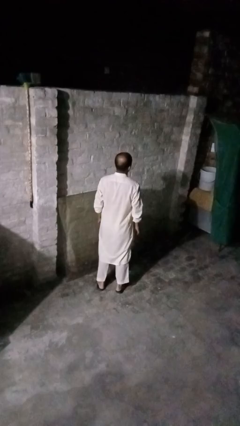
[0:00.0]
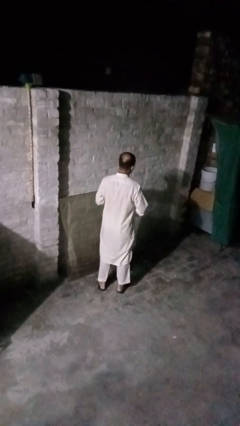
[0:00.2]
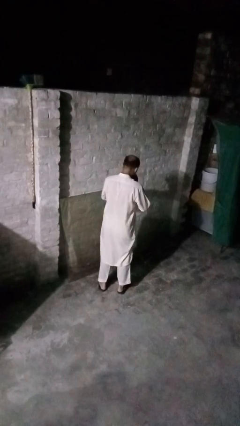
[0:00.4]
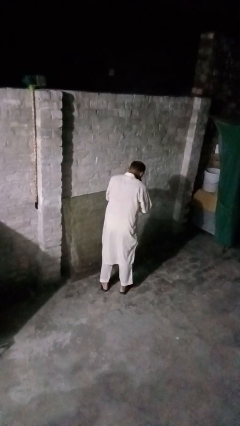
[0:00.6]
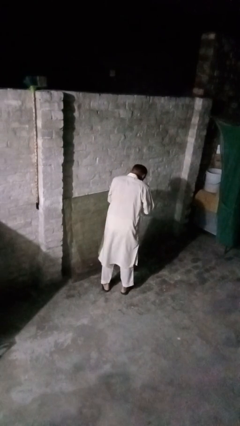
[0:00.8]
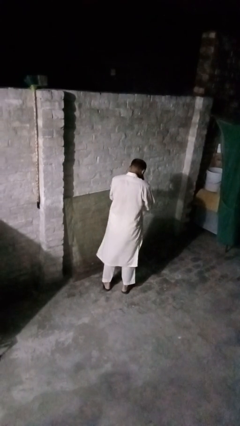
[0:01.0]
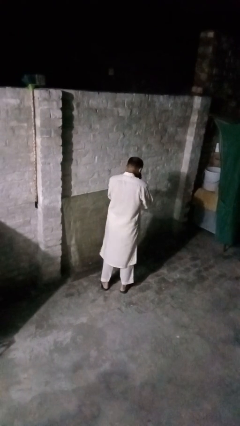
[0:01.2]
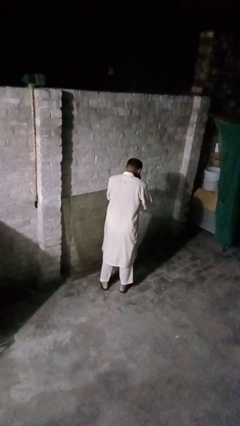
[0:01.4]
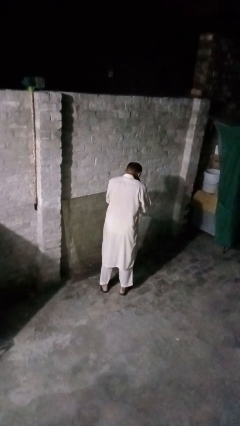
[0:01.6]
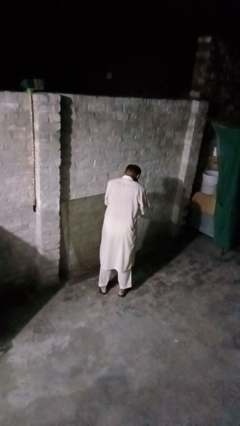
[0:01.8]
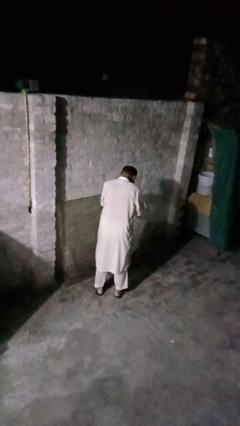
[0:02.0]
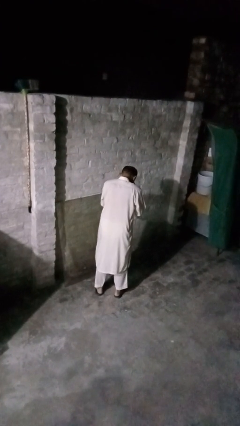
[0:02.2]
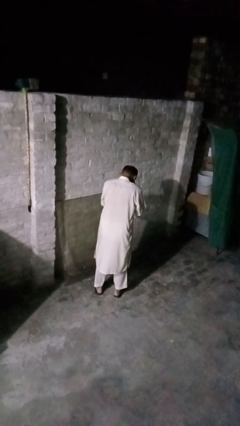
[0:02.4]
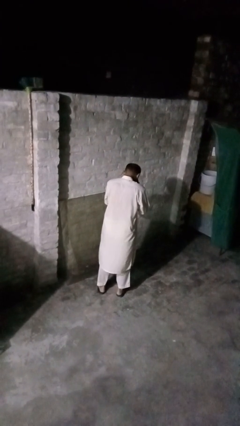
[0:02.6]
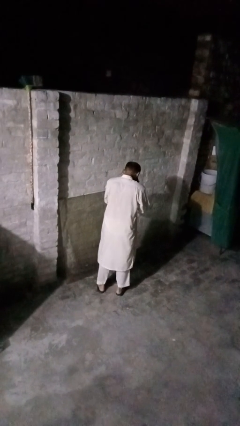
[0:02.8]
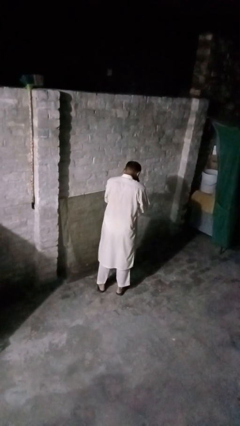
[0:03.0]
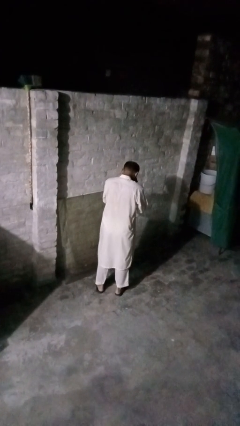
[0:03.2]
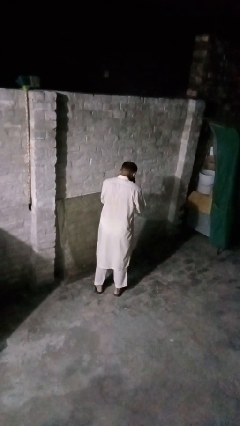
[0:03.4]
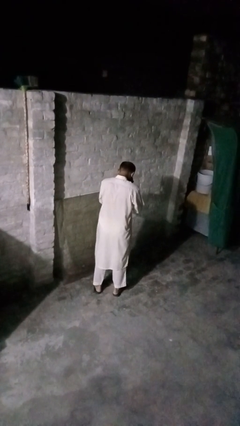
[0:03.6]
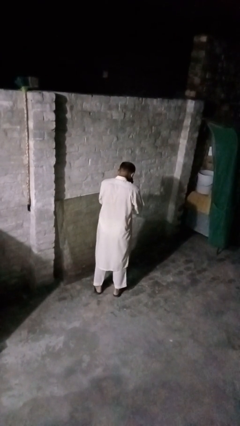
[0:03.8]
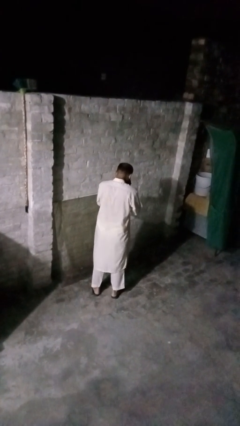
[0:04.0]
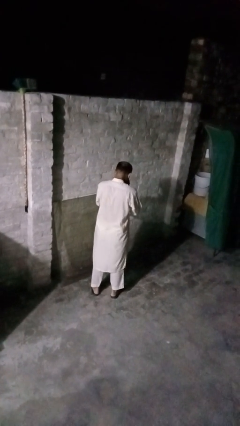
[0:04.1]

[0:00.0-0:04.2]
person sneezes into hand

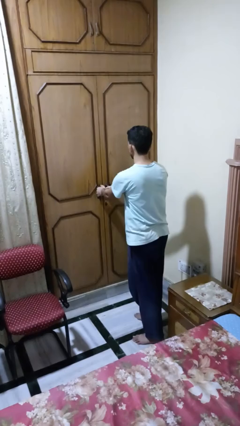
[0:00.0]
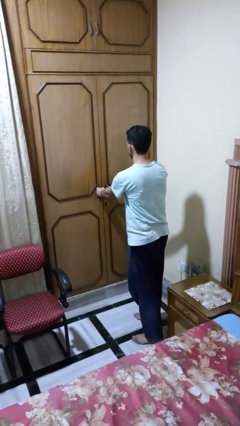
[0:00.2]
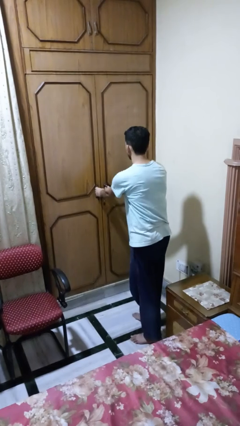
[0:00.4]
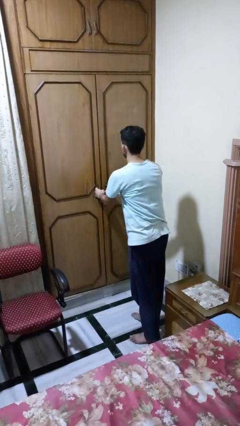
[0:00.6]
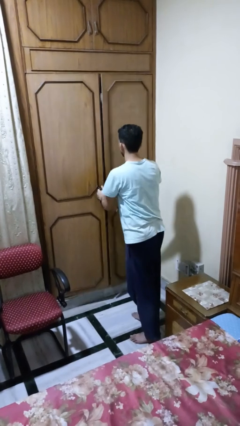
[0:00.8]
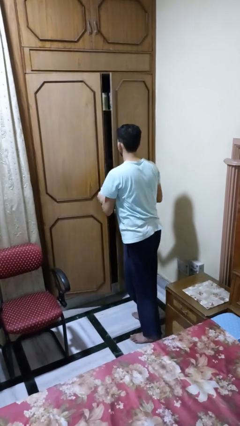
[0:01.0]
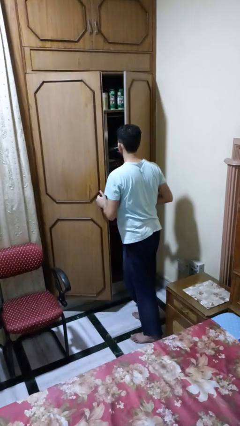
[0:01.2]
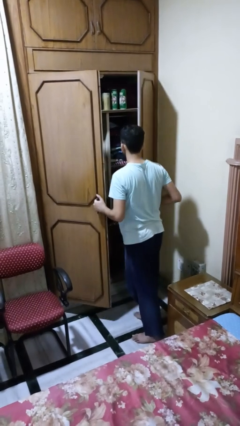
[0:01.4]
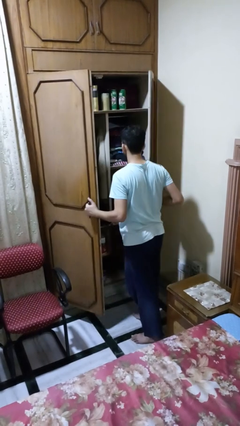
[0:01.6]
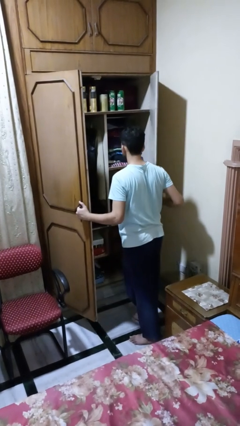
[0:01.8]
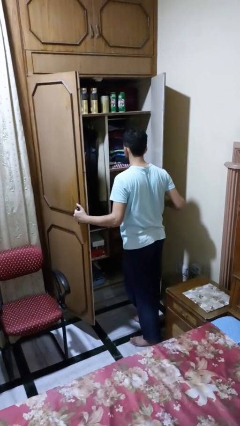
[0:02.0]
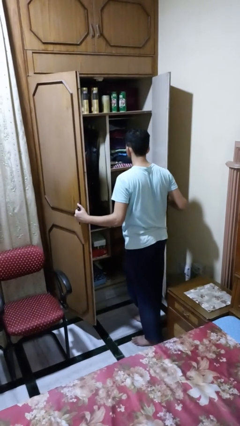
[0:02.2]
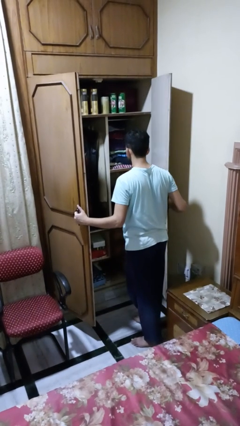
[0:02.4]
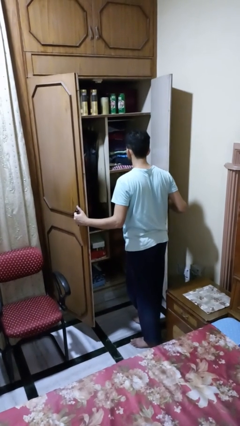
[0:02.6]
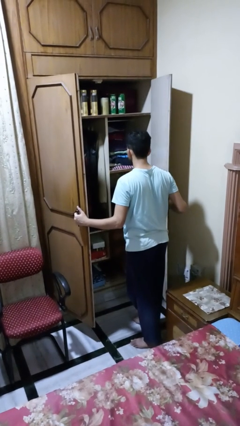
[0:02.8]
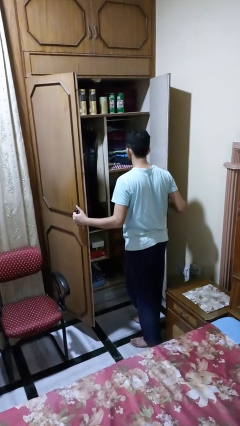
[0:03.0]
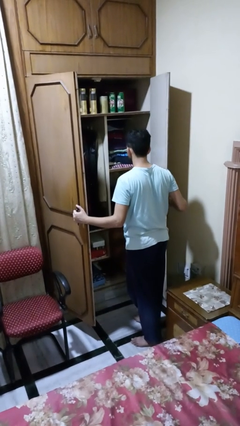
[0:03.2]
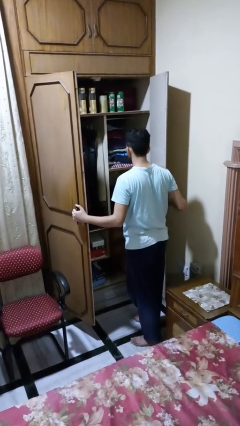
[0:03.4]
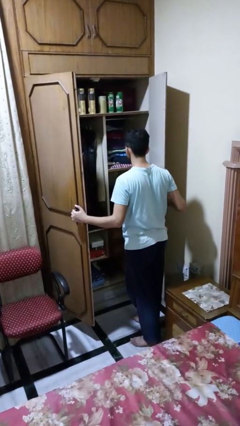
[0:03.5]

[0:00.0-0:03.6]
person opens closet door

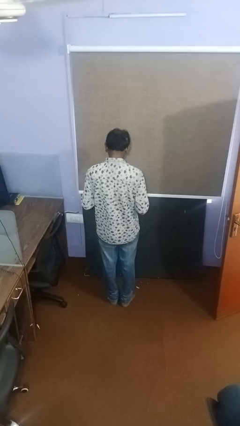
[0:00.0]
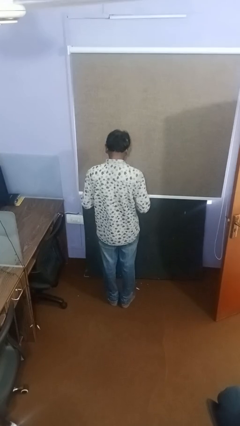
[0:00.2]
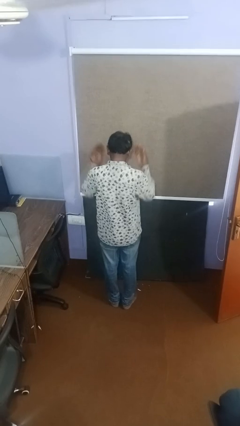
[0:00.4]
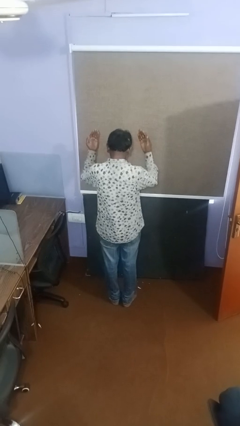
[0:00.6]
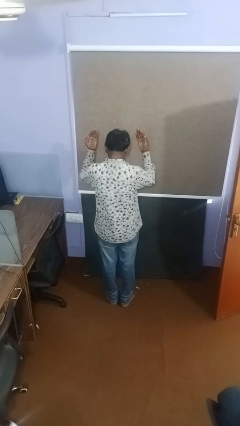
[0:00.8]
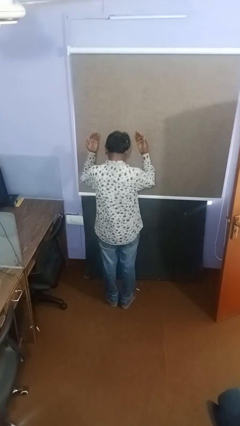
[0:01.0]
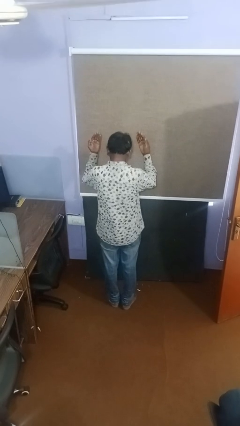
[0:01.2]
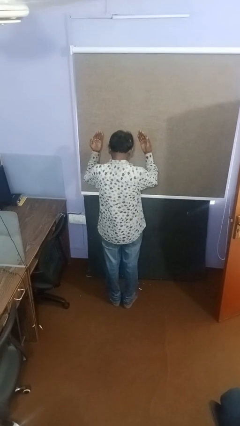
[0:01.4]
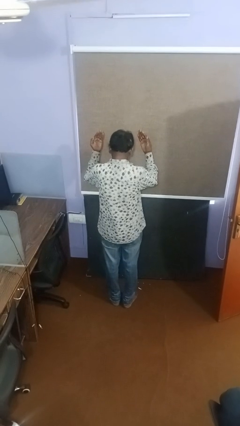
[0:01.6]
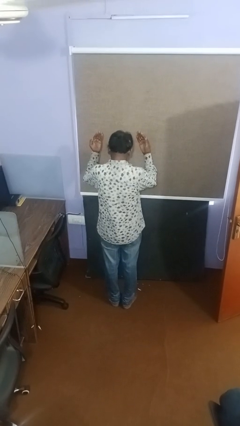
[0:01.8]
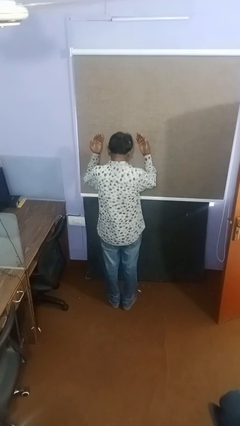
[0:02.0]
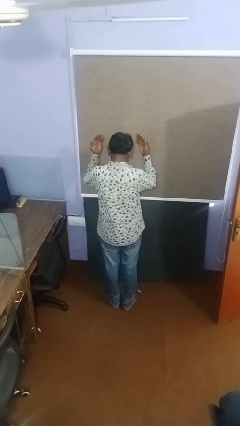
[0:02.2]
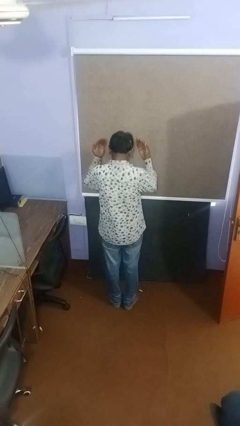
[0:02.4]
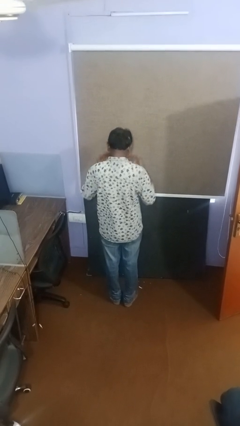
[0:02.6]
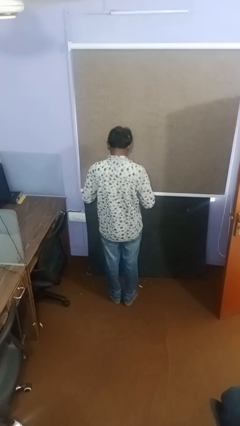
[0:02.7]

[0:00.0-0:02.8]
person gestures swipe up

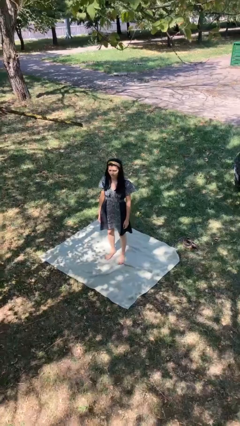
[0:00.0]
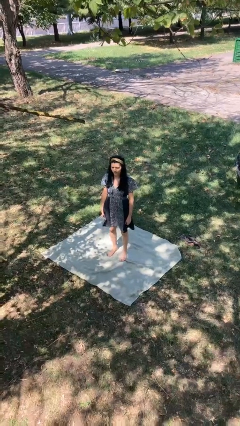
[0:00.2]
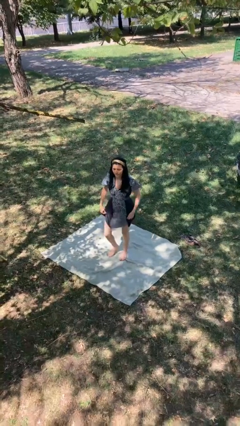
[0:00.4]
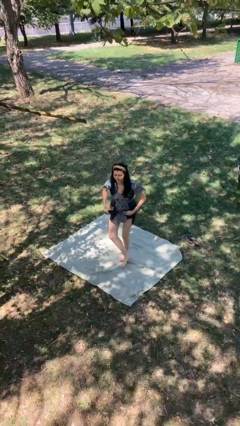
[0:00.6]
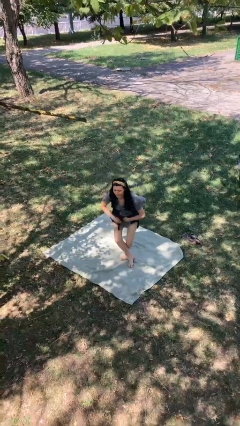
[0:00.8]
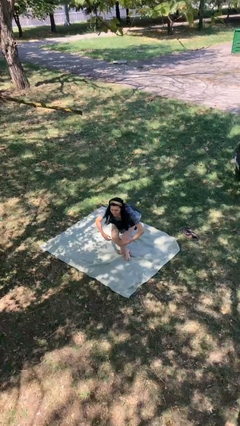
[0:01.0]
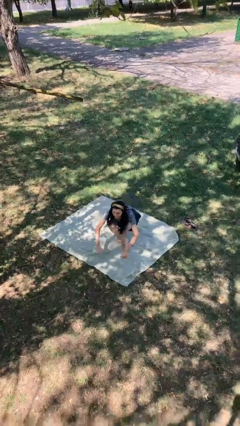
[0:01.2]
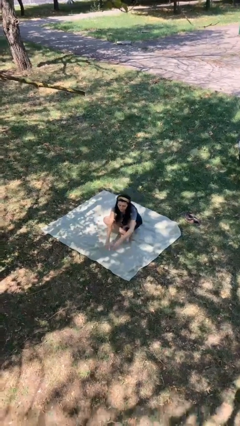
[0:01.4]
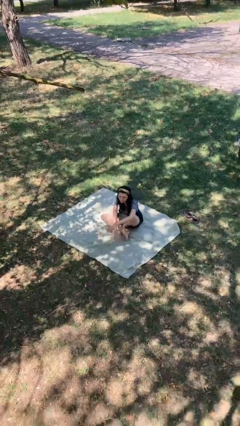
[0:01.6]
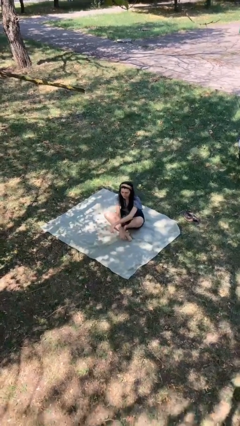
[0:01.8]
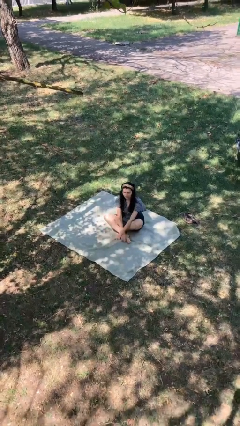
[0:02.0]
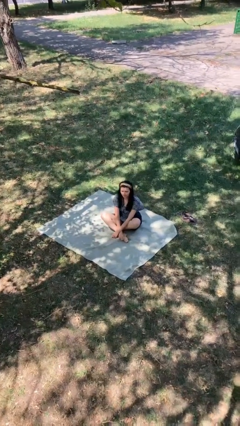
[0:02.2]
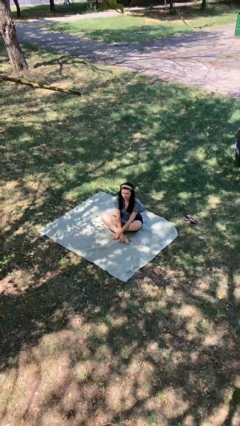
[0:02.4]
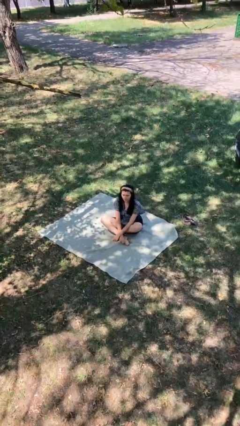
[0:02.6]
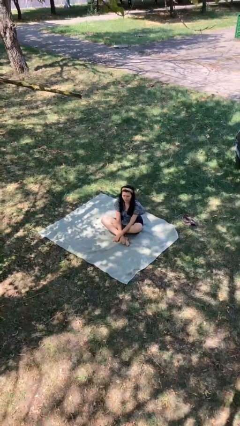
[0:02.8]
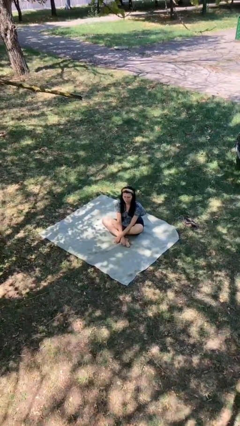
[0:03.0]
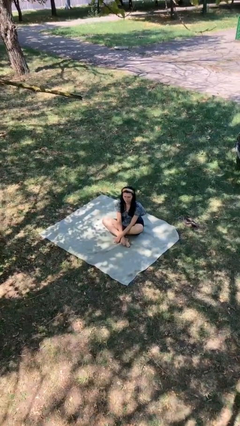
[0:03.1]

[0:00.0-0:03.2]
person sits crisscross

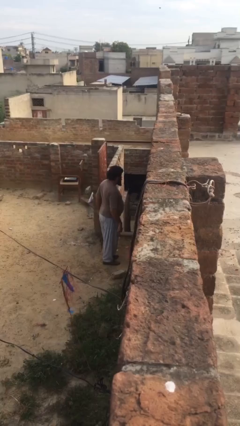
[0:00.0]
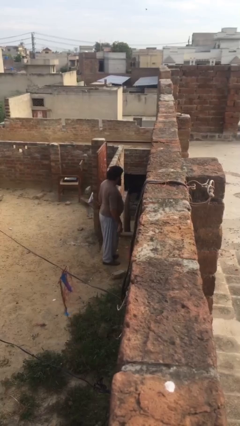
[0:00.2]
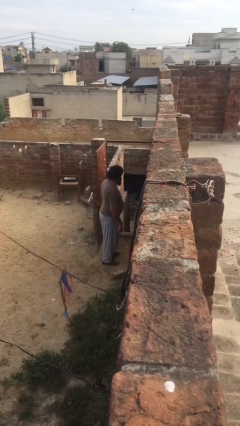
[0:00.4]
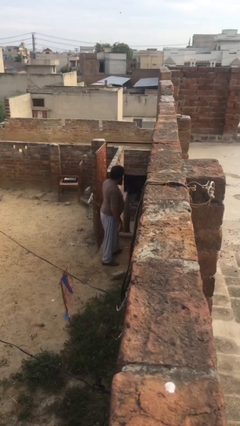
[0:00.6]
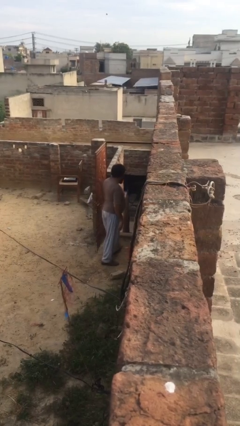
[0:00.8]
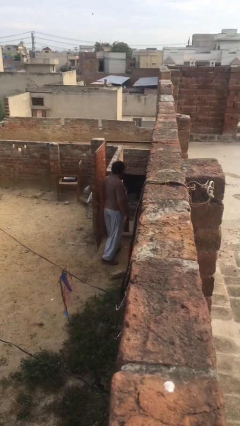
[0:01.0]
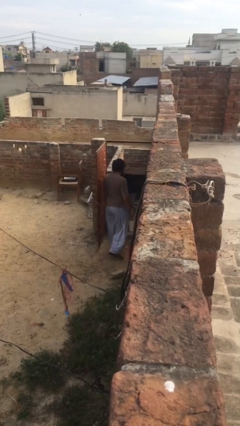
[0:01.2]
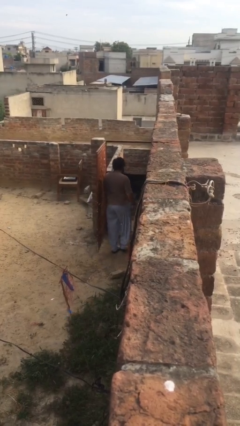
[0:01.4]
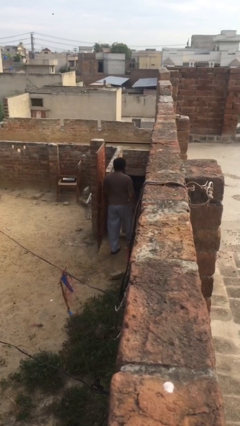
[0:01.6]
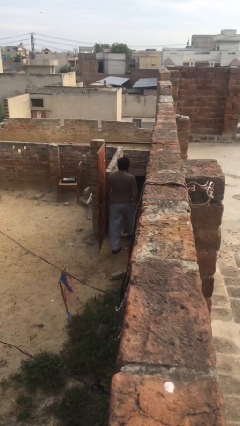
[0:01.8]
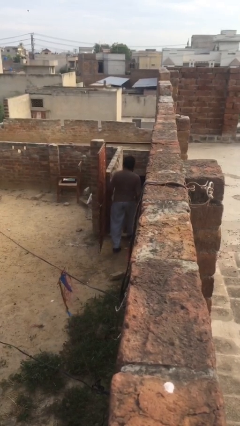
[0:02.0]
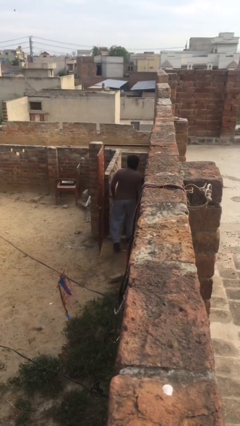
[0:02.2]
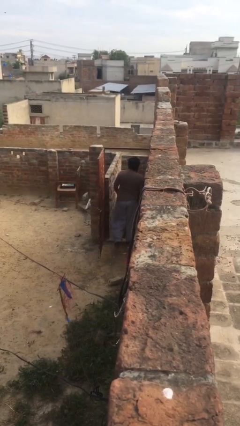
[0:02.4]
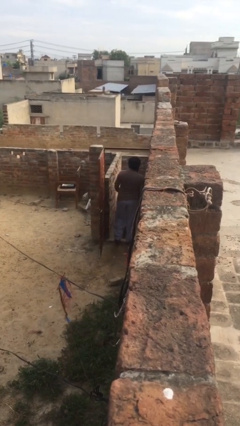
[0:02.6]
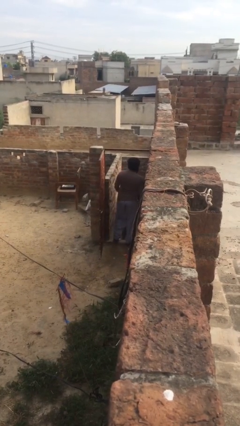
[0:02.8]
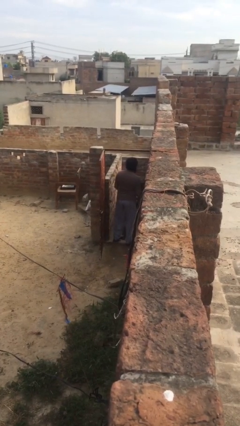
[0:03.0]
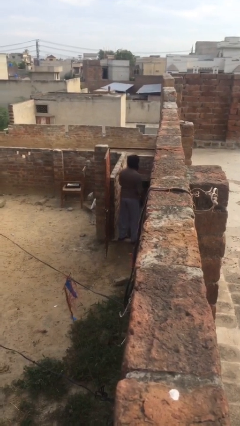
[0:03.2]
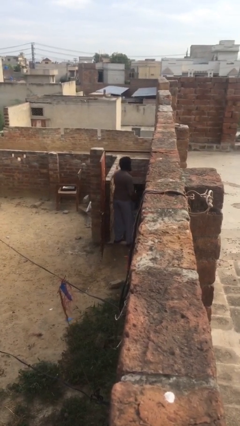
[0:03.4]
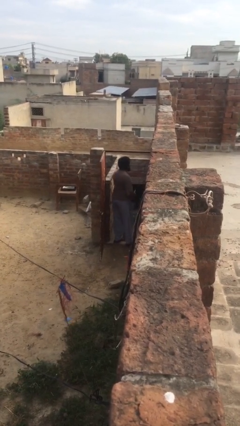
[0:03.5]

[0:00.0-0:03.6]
person exits scene through structure
